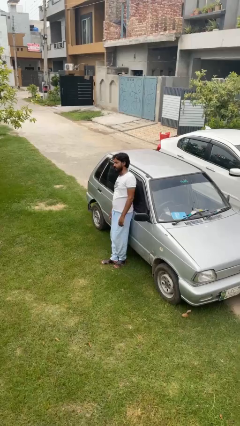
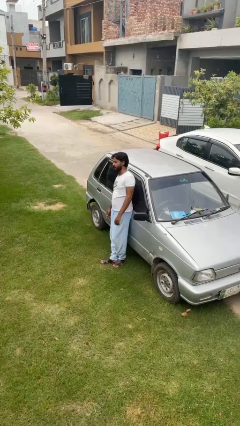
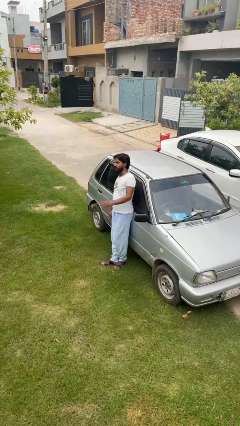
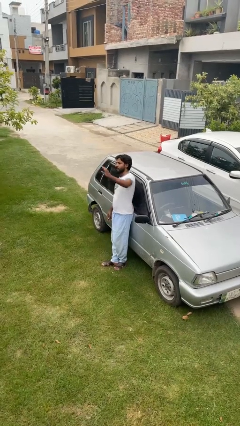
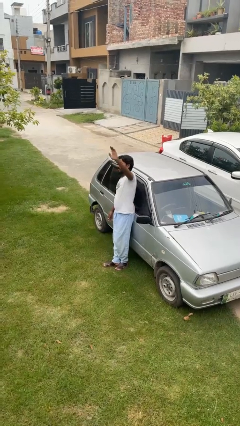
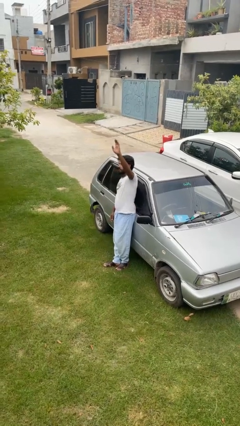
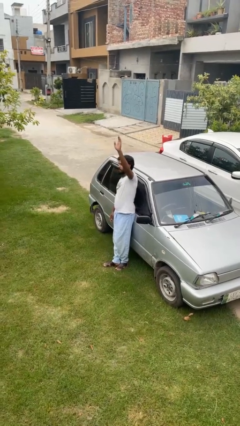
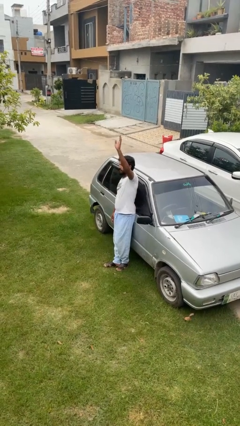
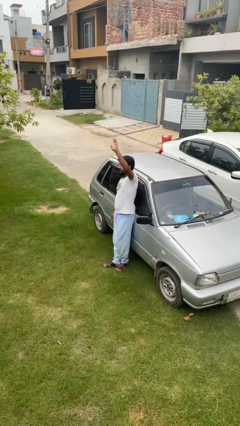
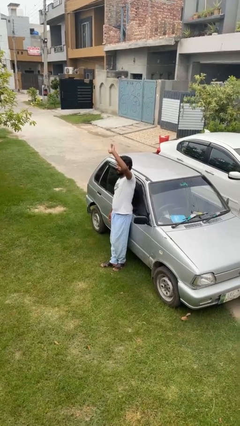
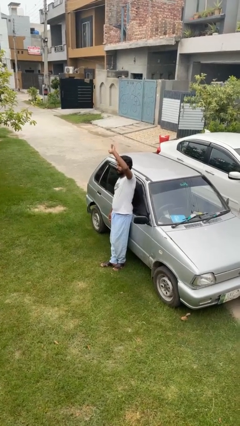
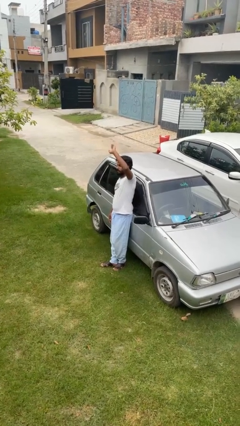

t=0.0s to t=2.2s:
person gestures raise hand

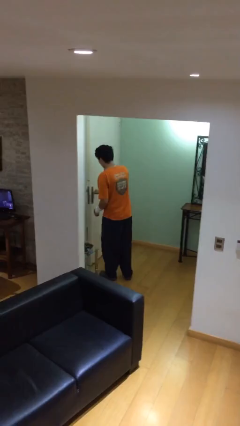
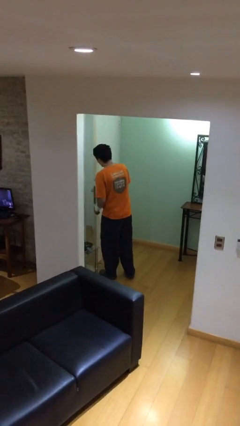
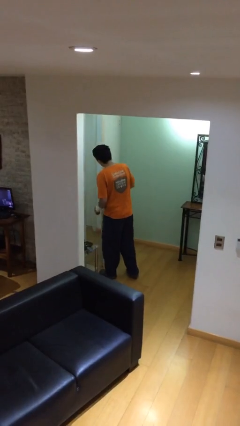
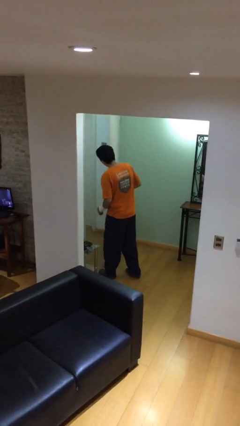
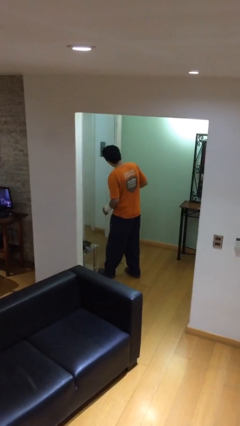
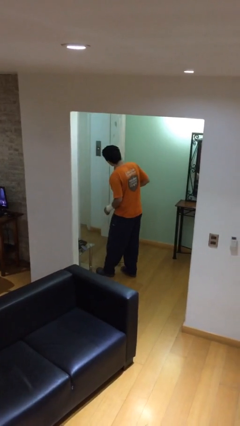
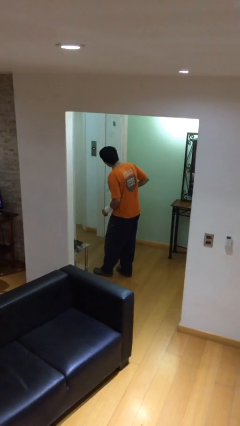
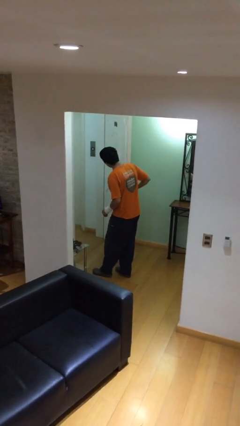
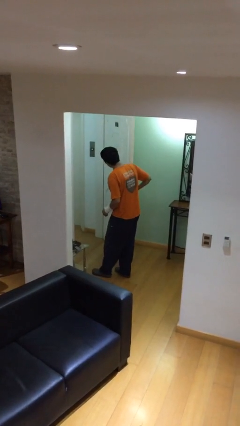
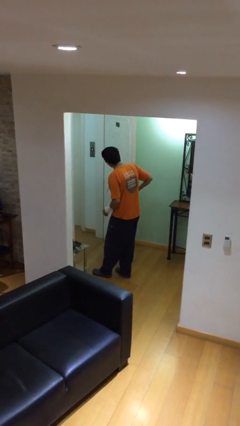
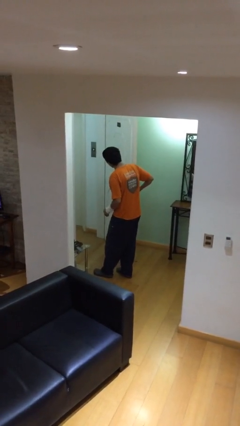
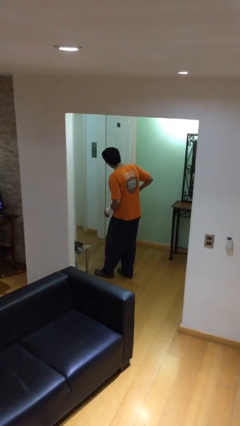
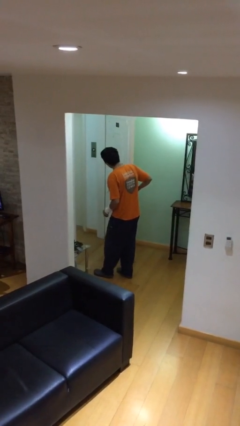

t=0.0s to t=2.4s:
person opens facility door

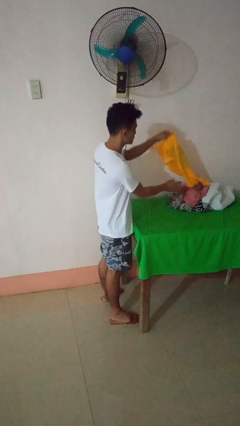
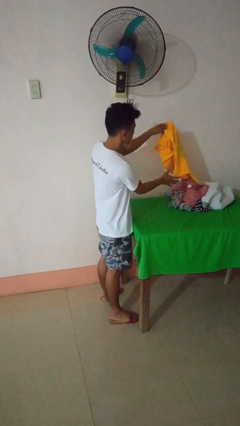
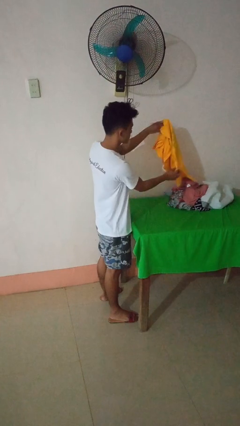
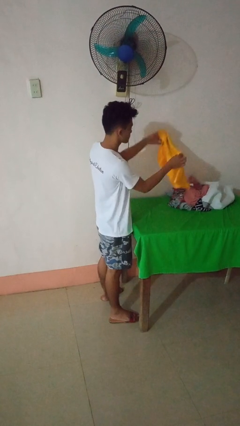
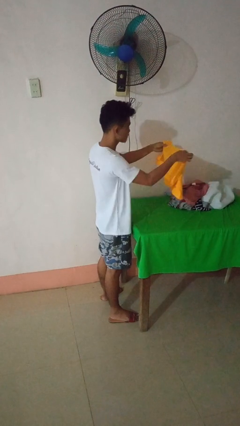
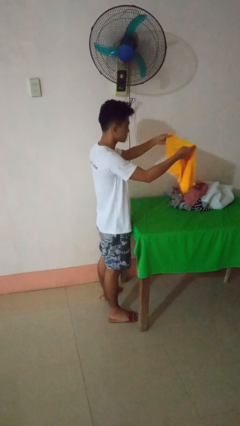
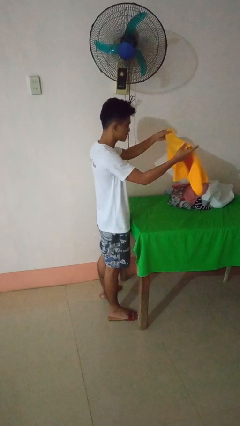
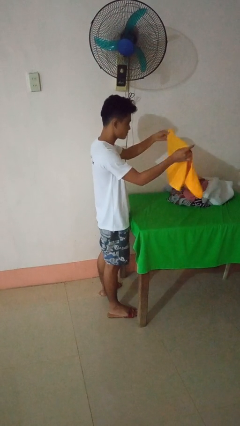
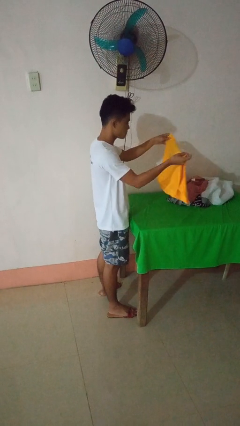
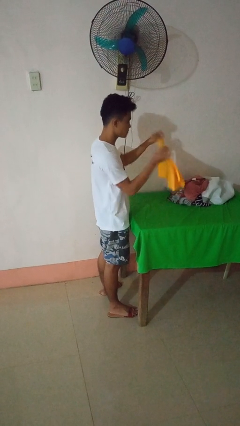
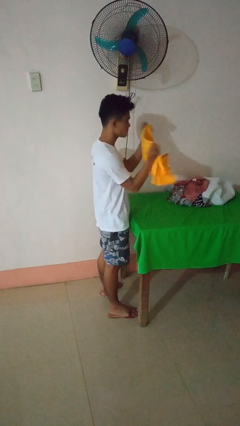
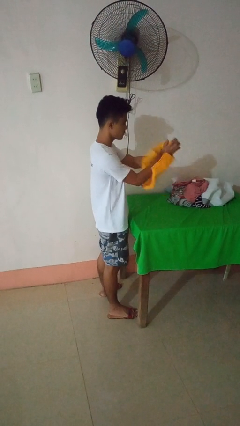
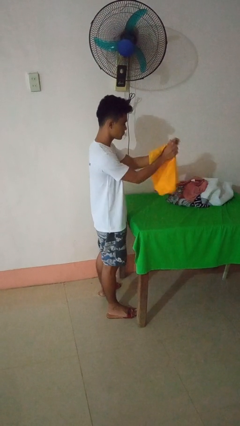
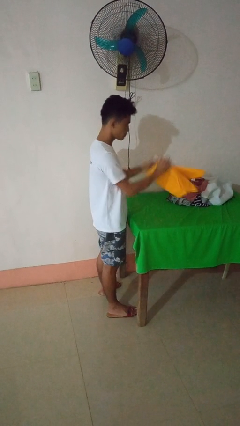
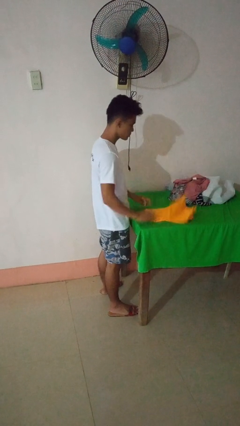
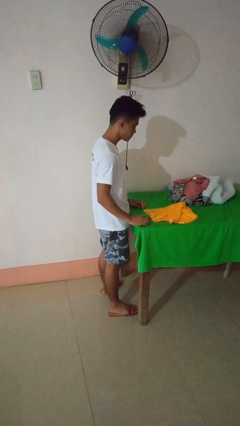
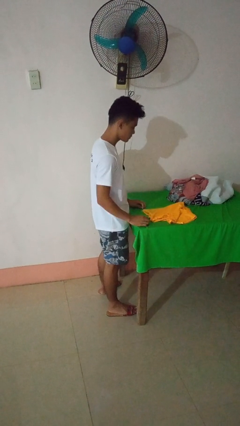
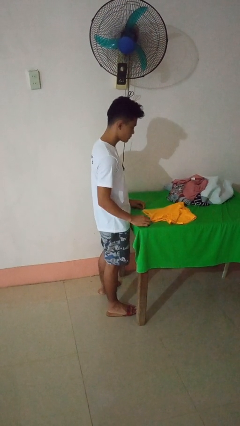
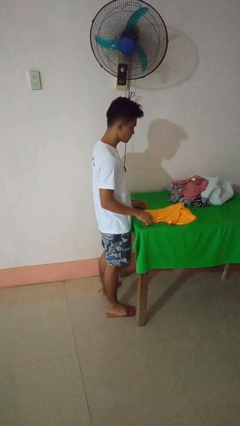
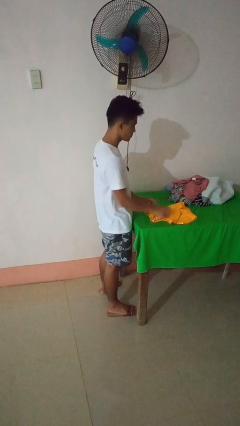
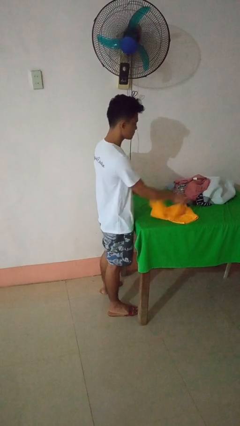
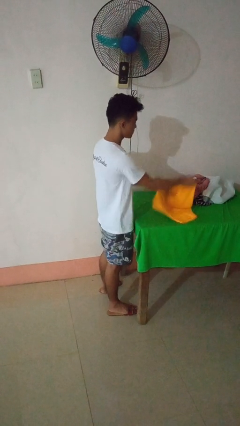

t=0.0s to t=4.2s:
person folds shirt

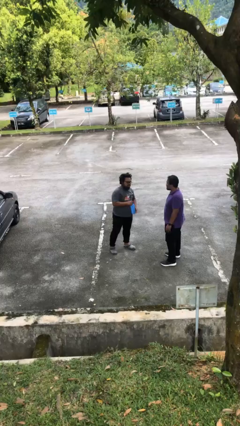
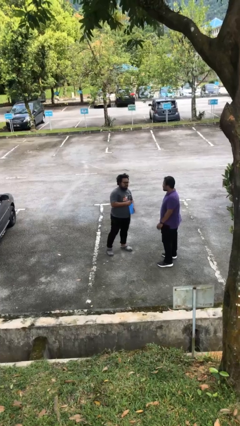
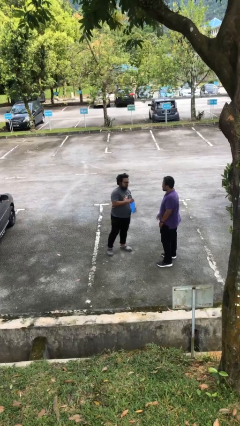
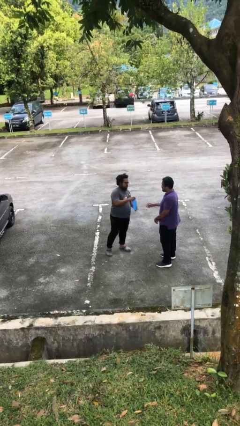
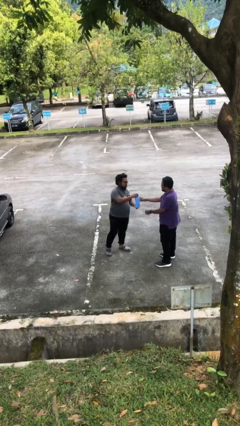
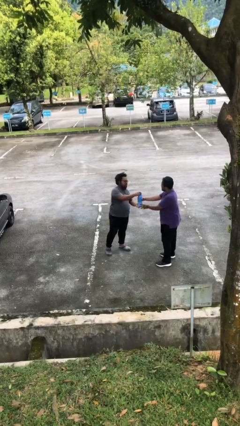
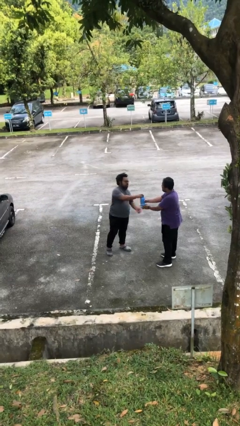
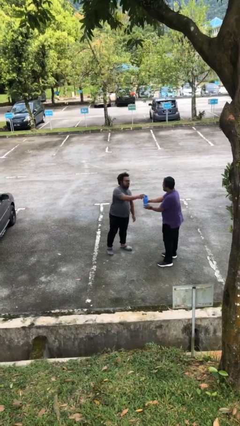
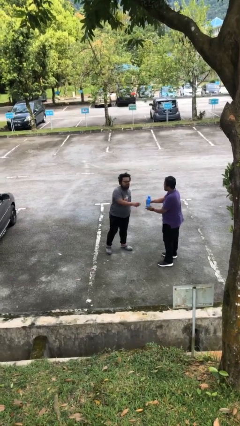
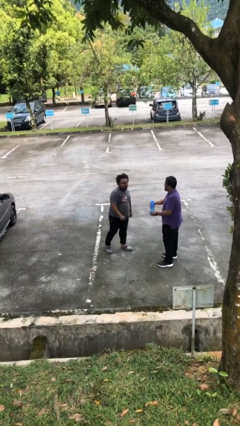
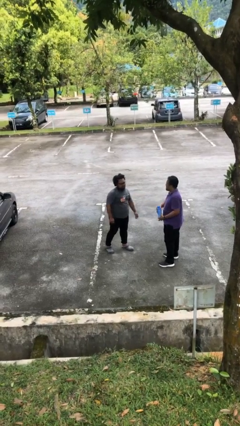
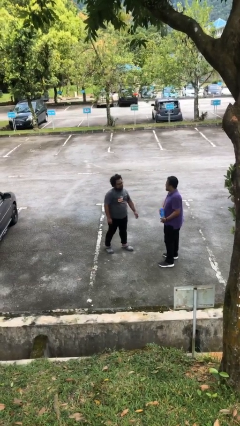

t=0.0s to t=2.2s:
person transfers object to person

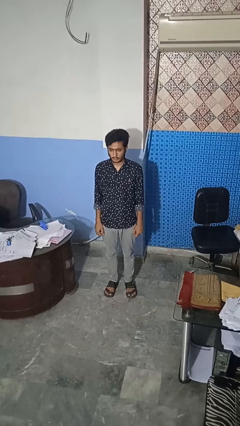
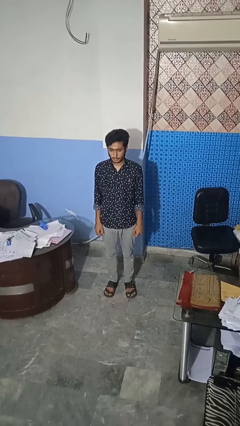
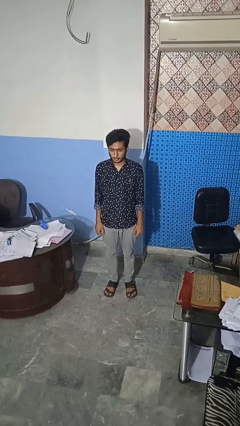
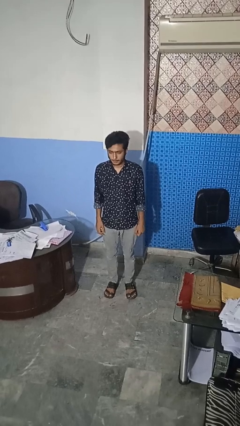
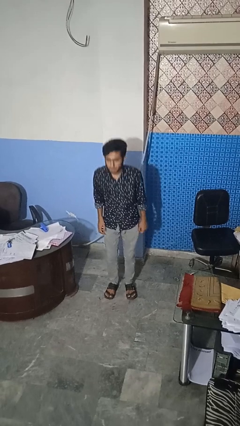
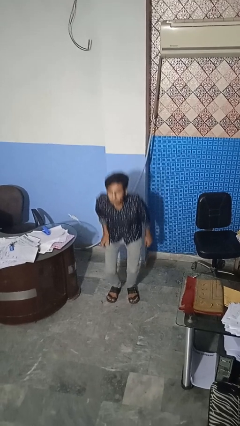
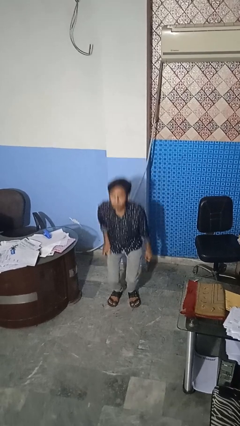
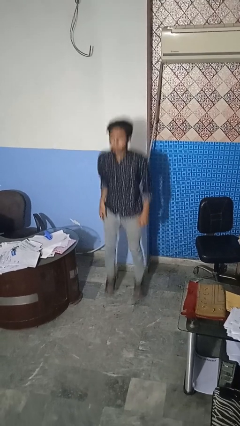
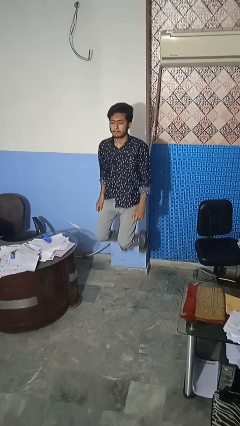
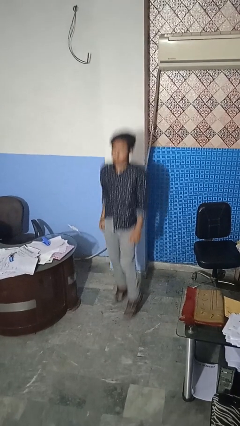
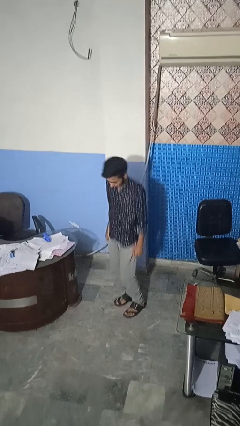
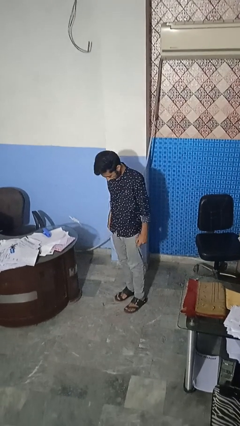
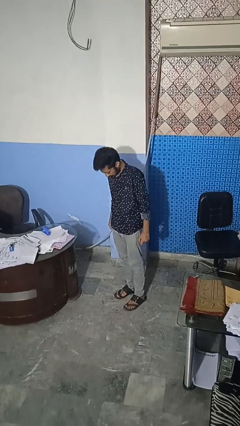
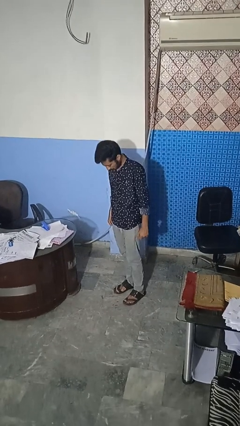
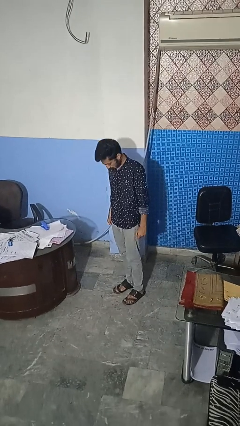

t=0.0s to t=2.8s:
person jumps

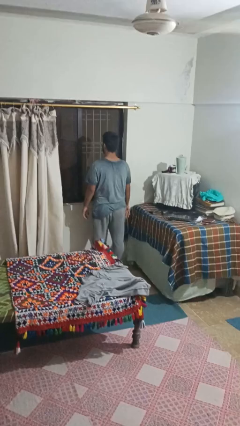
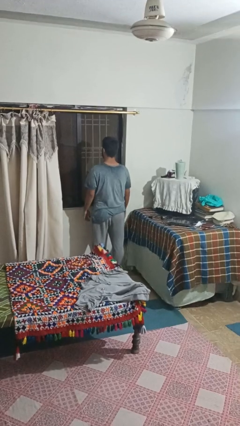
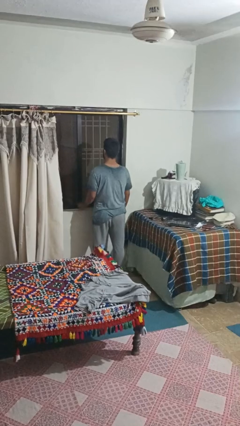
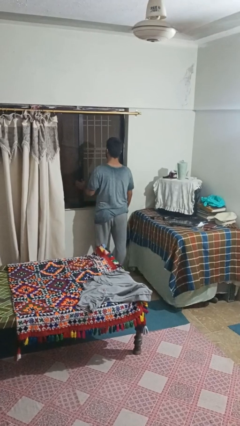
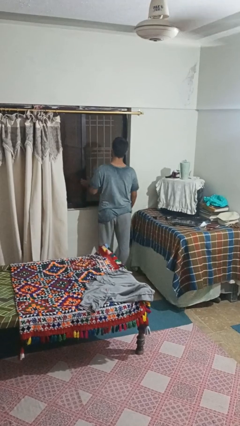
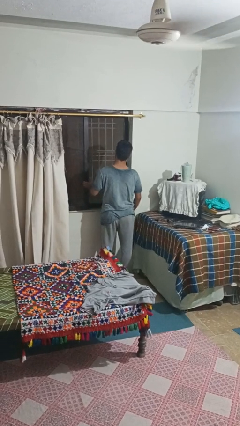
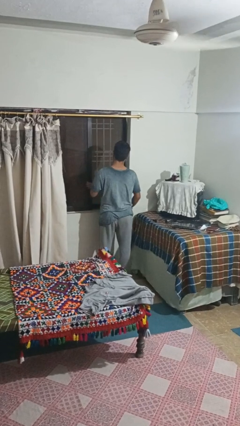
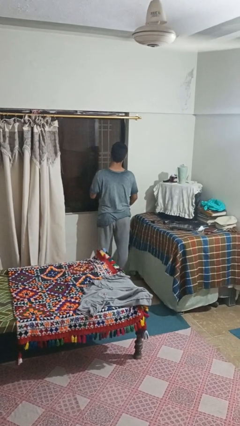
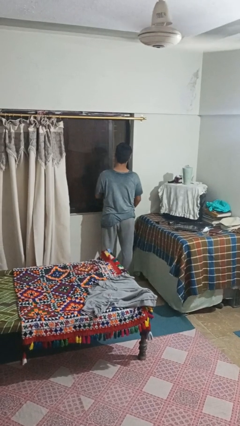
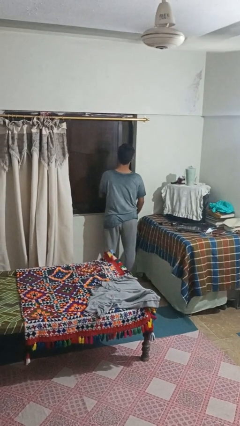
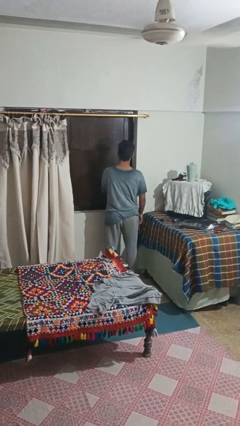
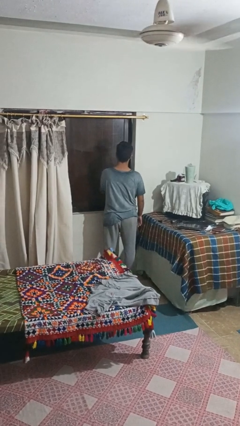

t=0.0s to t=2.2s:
person closes home window

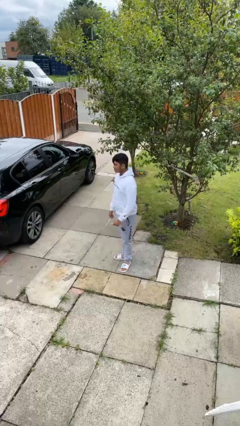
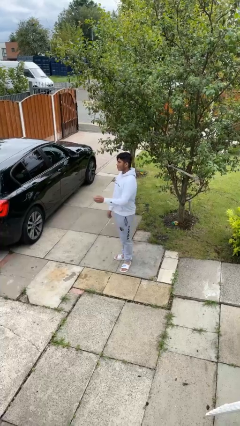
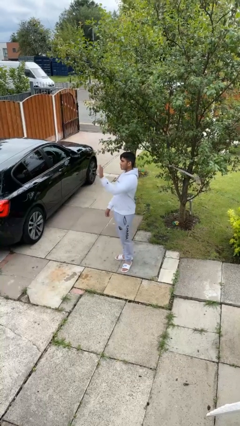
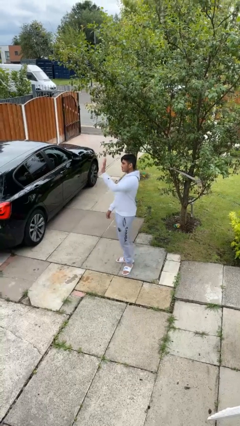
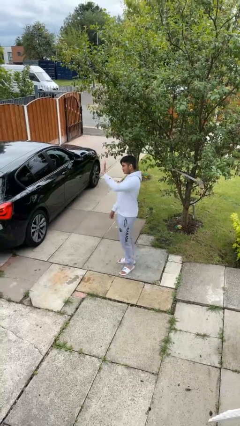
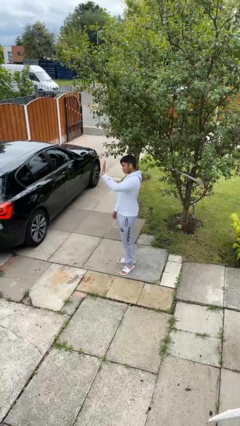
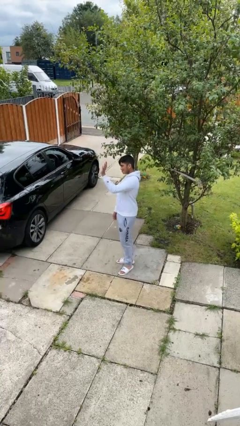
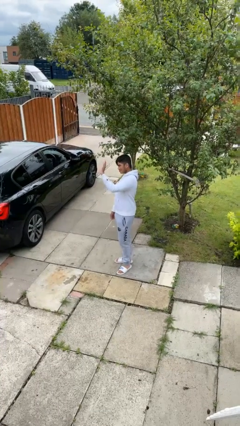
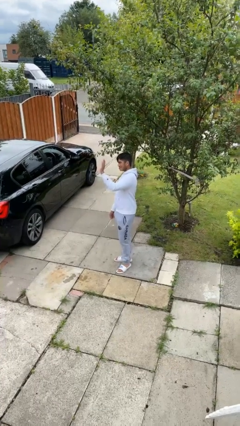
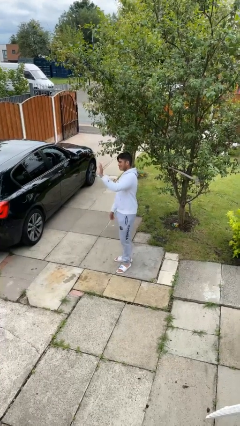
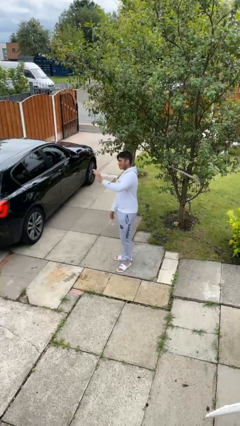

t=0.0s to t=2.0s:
person waves at person
